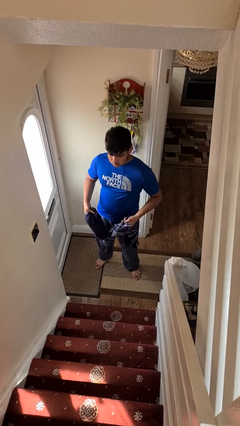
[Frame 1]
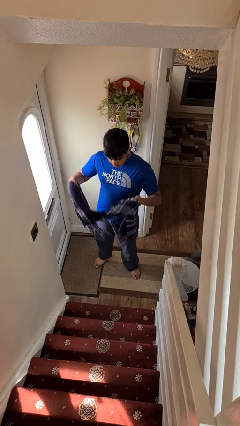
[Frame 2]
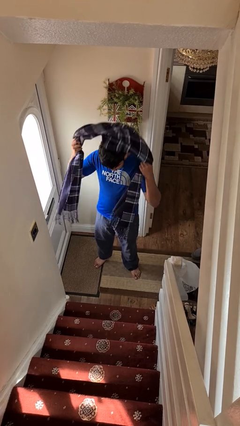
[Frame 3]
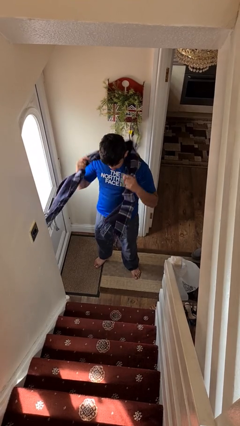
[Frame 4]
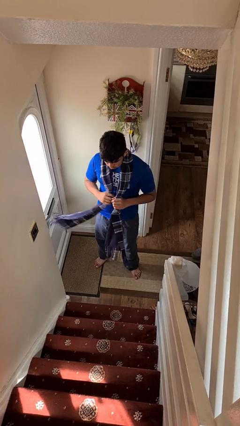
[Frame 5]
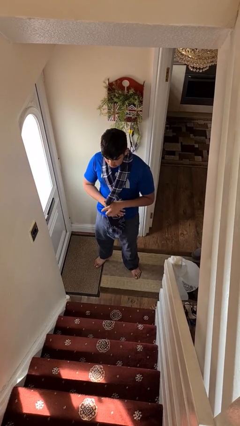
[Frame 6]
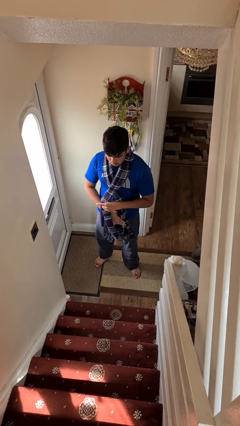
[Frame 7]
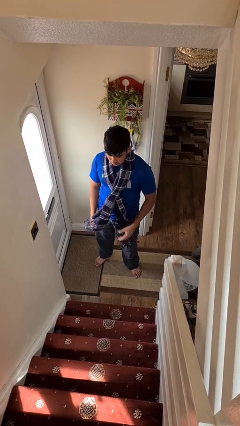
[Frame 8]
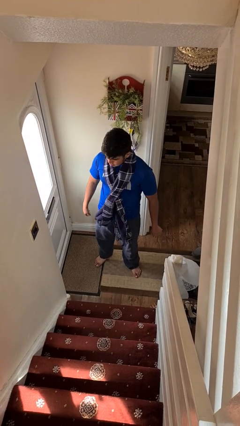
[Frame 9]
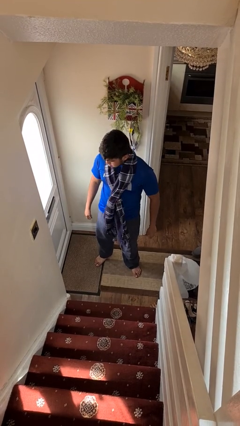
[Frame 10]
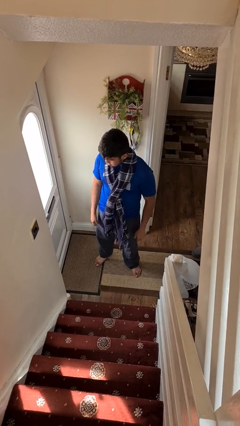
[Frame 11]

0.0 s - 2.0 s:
person puts on scarf

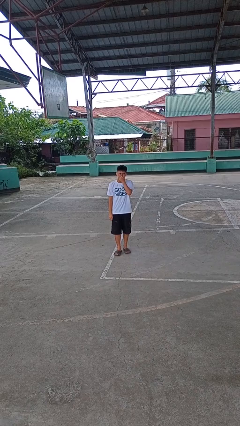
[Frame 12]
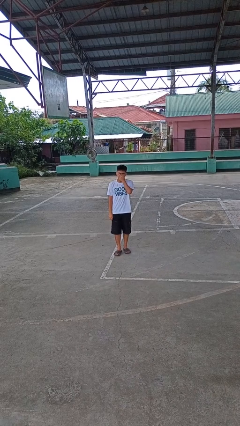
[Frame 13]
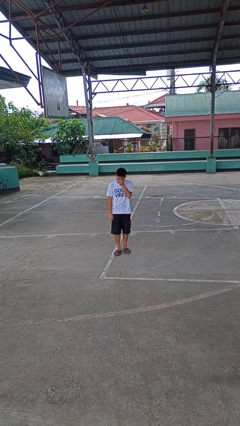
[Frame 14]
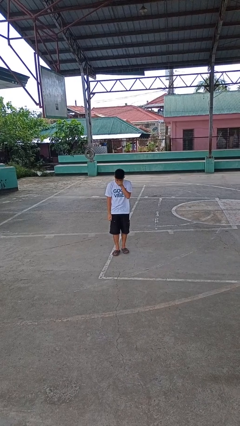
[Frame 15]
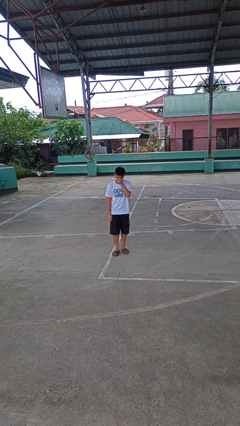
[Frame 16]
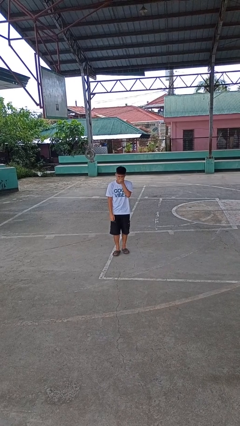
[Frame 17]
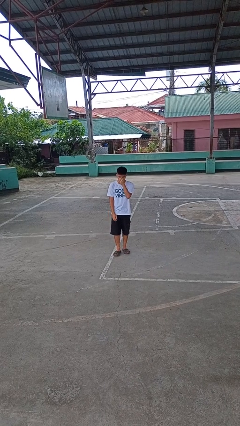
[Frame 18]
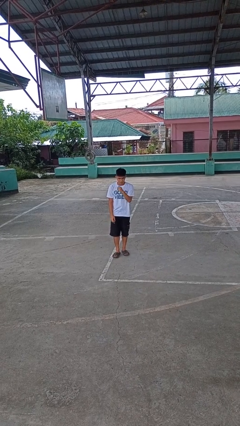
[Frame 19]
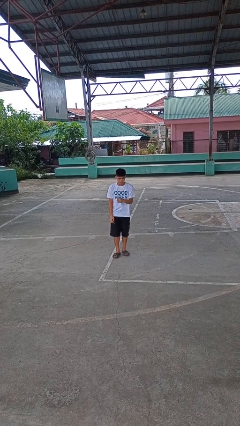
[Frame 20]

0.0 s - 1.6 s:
person sneezes into hand

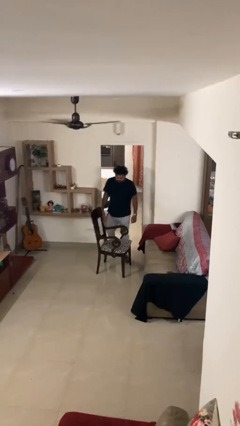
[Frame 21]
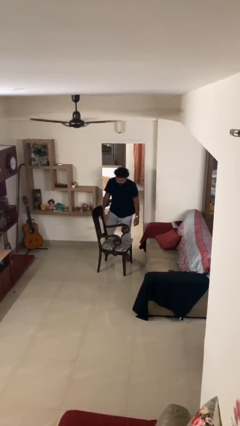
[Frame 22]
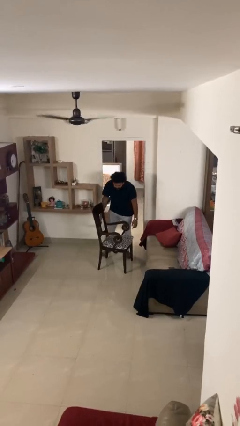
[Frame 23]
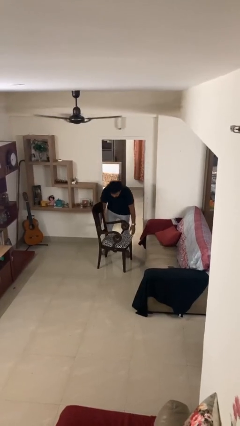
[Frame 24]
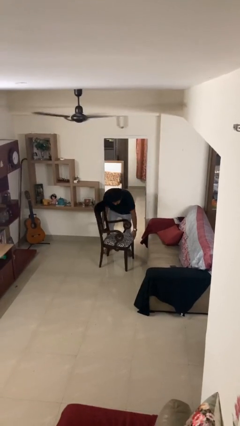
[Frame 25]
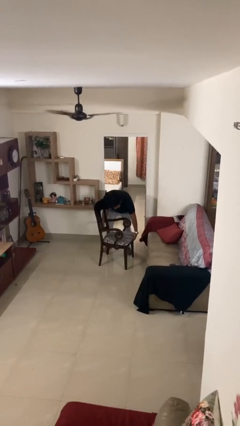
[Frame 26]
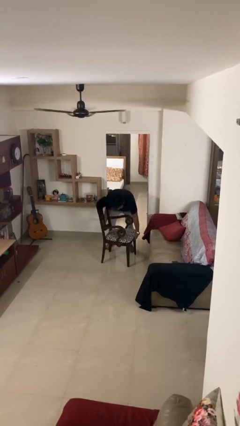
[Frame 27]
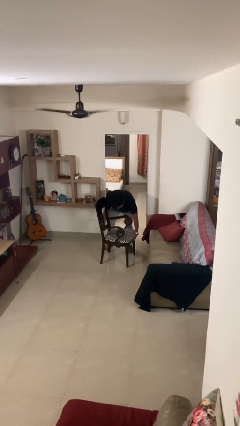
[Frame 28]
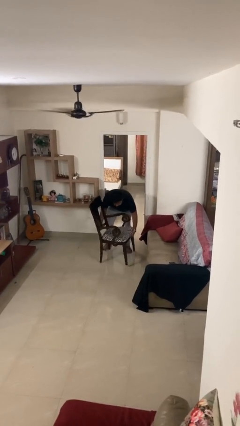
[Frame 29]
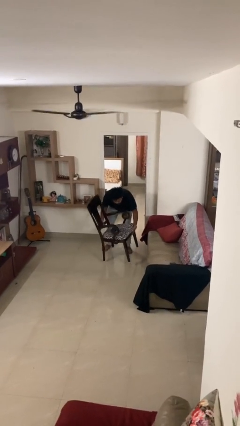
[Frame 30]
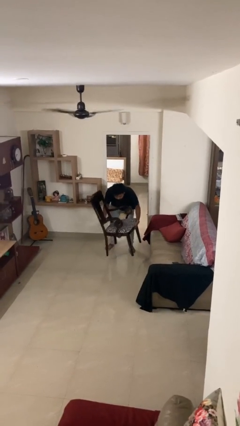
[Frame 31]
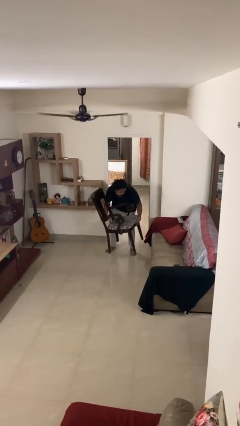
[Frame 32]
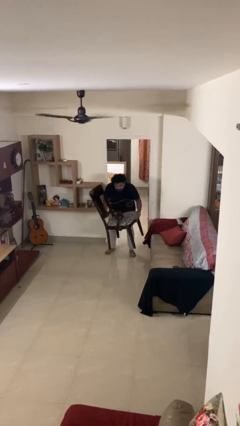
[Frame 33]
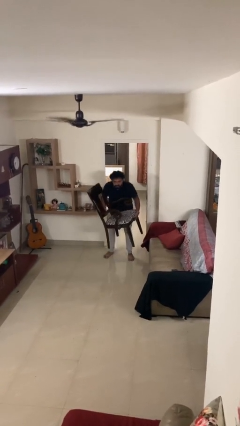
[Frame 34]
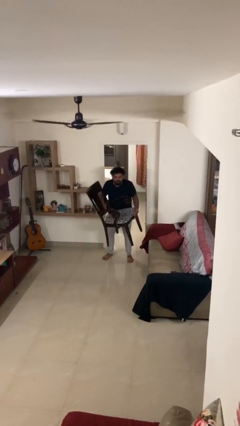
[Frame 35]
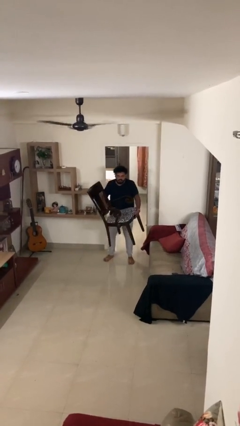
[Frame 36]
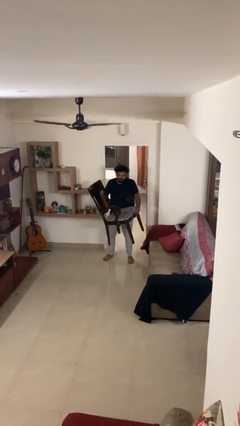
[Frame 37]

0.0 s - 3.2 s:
person picks up object from floor

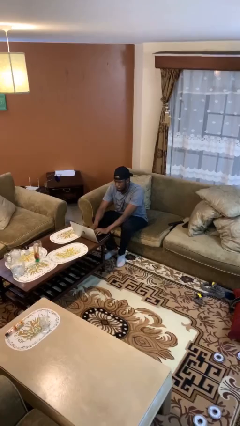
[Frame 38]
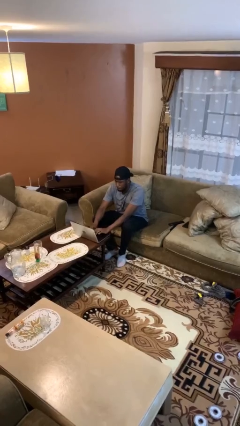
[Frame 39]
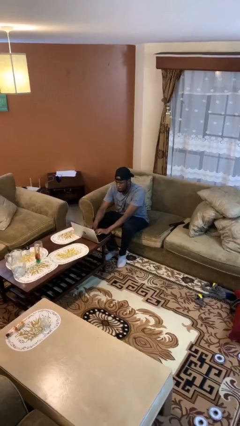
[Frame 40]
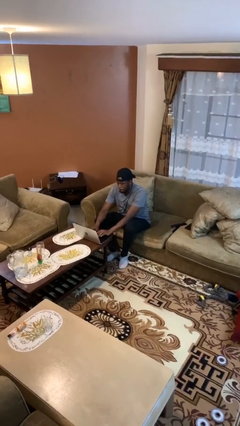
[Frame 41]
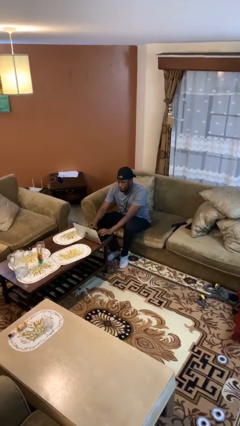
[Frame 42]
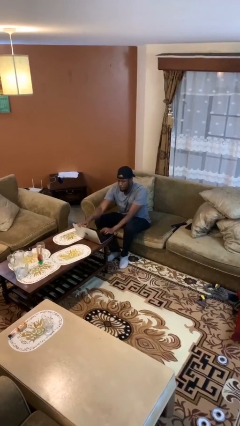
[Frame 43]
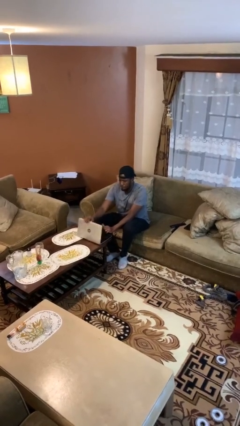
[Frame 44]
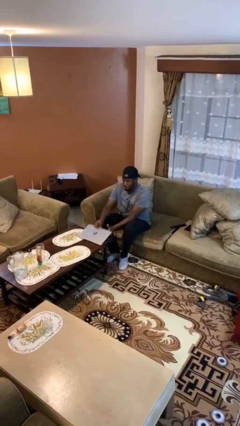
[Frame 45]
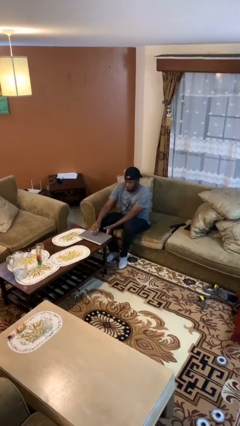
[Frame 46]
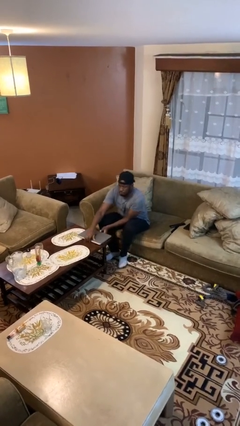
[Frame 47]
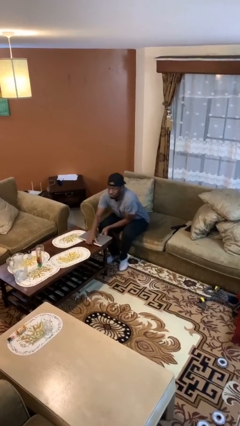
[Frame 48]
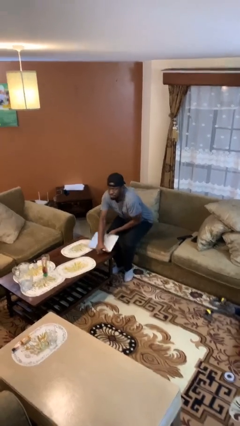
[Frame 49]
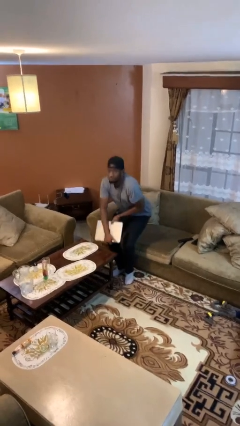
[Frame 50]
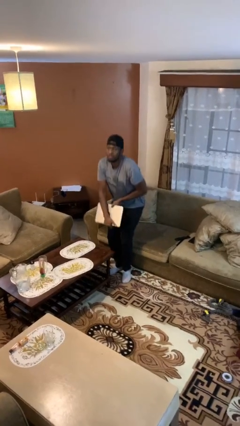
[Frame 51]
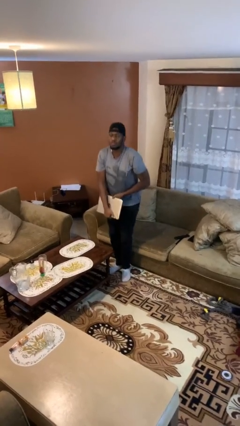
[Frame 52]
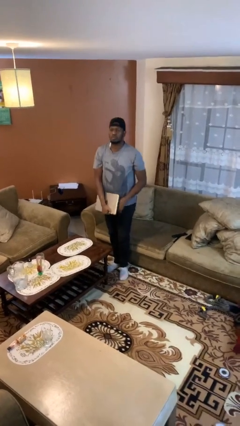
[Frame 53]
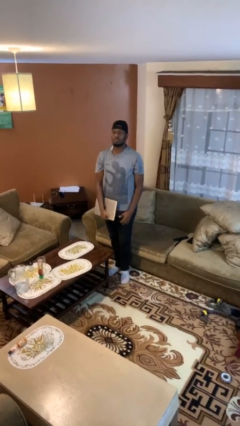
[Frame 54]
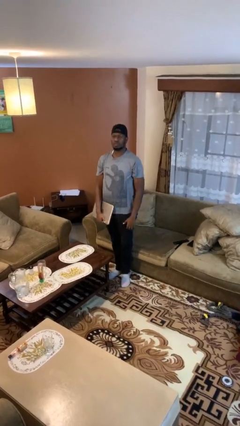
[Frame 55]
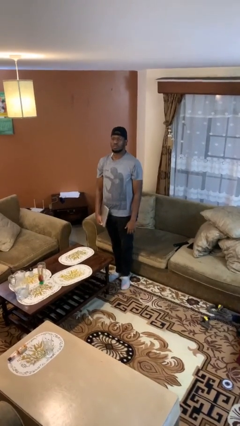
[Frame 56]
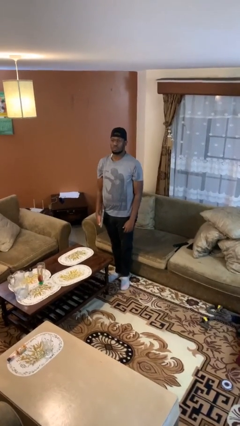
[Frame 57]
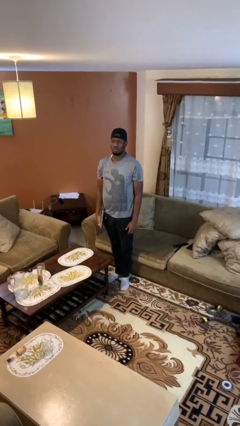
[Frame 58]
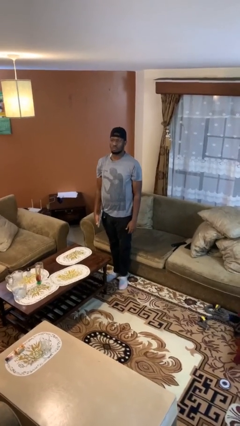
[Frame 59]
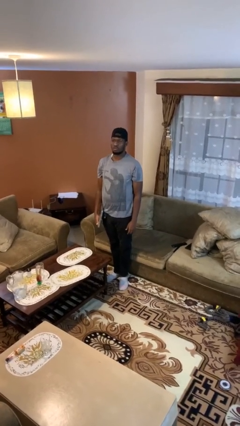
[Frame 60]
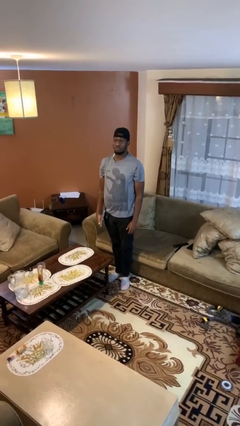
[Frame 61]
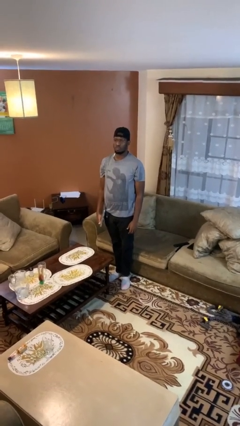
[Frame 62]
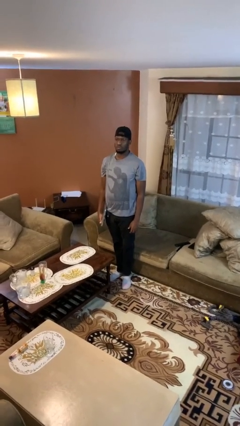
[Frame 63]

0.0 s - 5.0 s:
person stands up

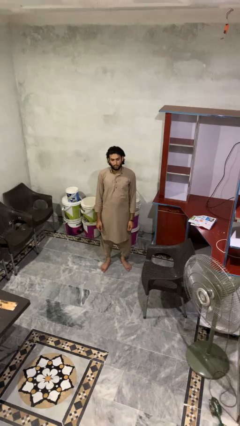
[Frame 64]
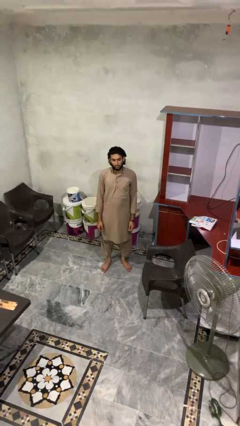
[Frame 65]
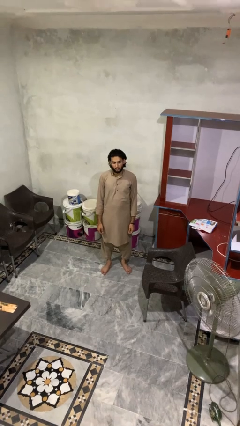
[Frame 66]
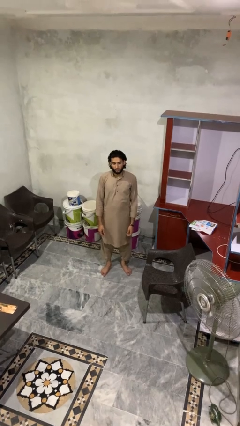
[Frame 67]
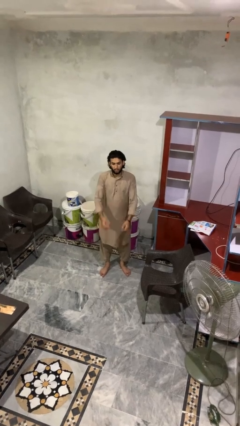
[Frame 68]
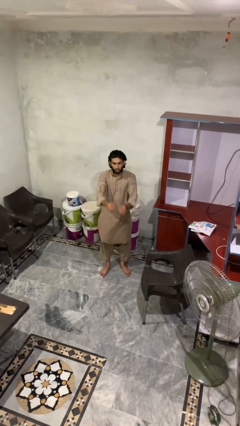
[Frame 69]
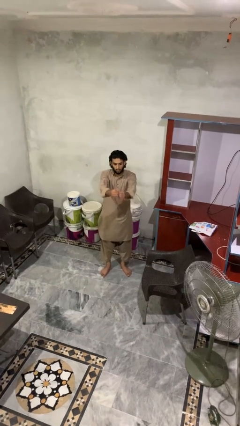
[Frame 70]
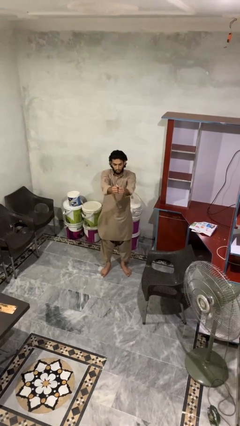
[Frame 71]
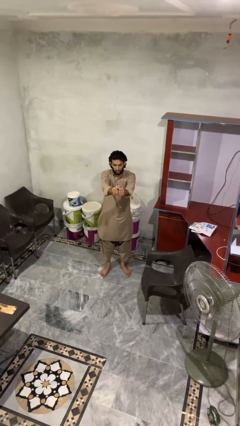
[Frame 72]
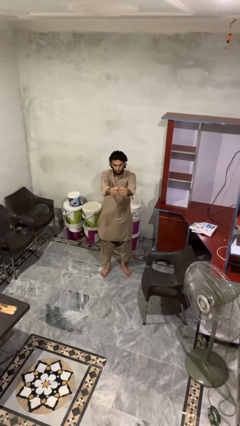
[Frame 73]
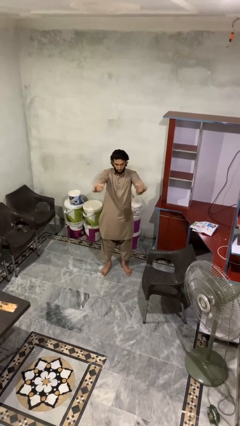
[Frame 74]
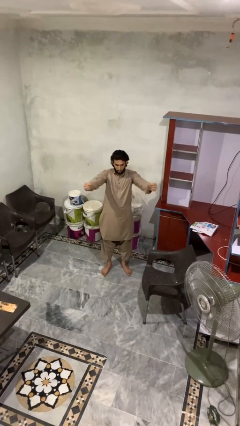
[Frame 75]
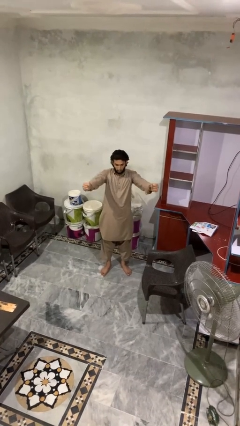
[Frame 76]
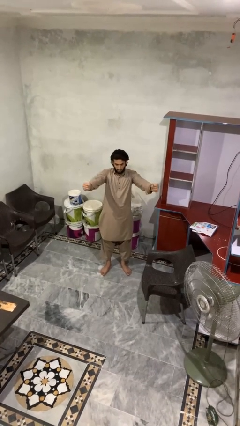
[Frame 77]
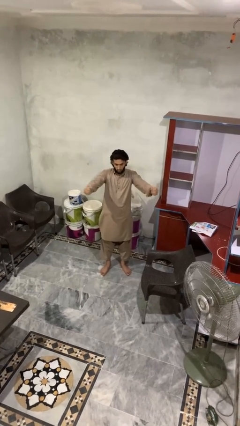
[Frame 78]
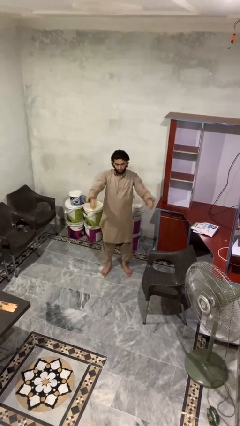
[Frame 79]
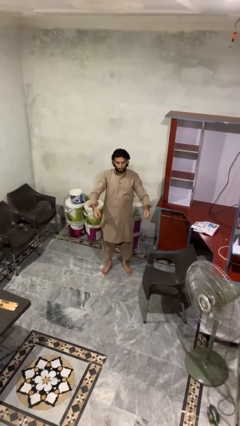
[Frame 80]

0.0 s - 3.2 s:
person gestures zoom in

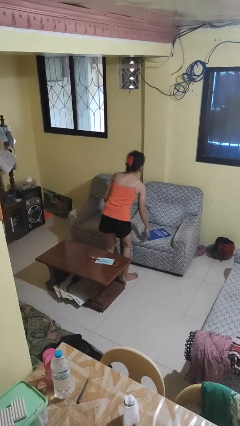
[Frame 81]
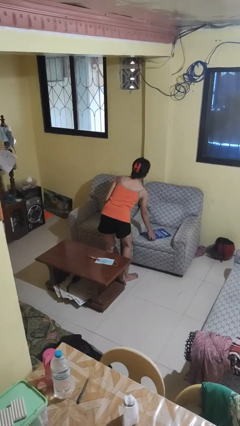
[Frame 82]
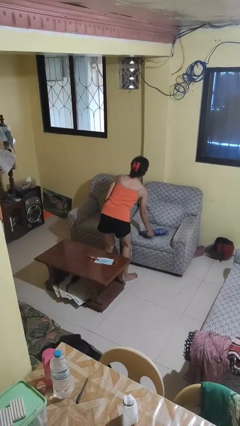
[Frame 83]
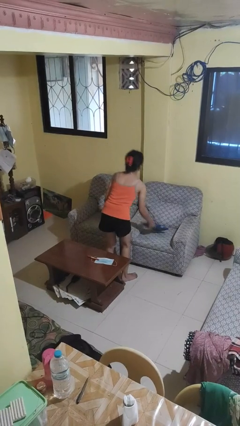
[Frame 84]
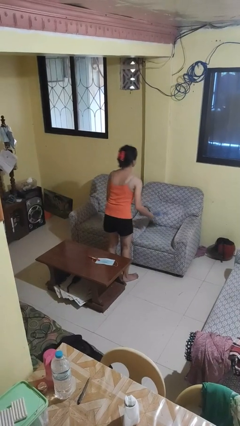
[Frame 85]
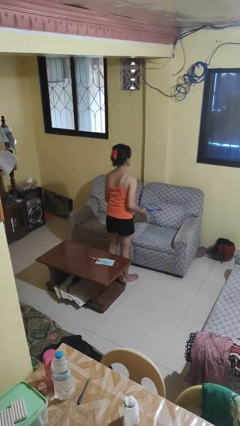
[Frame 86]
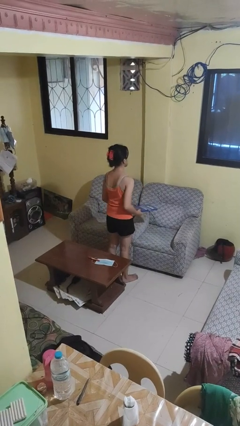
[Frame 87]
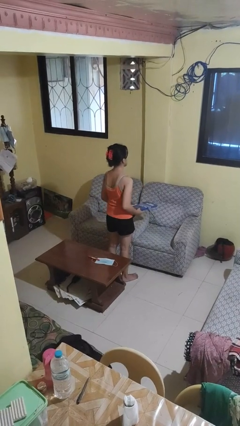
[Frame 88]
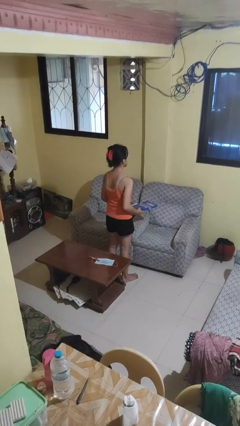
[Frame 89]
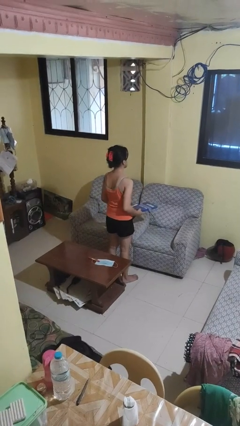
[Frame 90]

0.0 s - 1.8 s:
person picks up object from couch

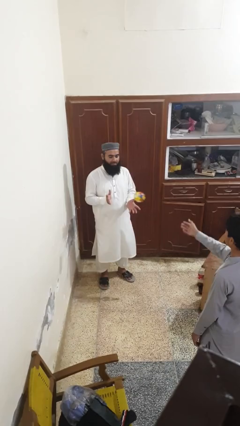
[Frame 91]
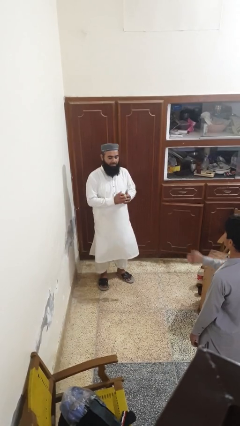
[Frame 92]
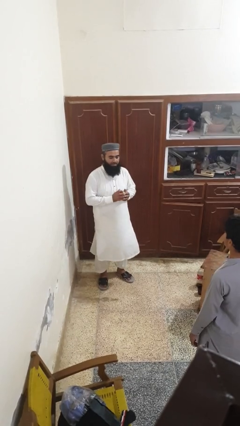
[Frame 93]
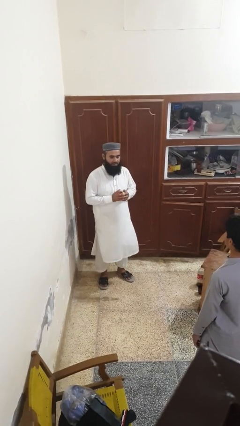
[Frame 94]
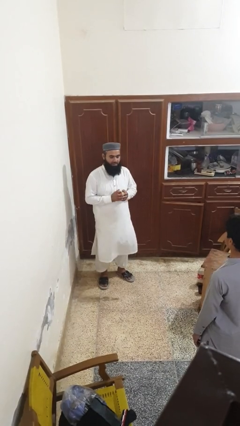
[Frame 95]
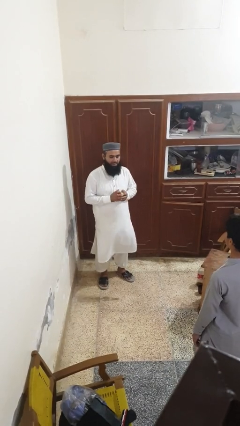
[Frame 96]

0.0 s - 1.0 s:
person catches object from person
